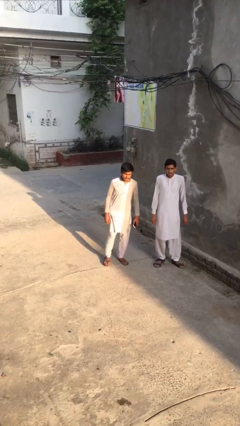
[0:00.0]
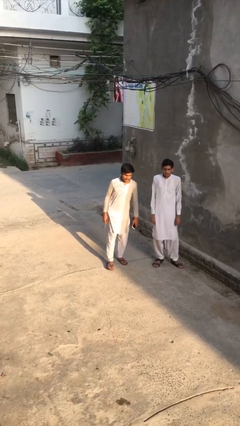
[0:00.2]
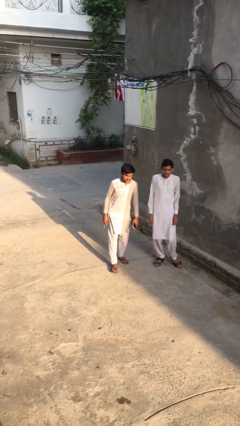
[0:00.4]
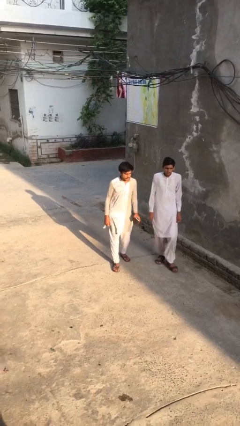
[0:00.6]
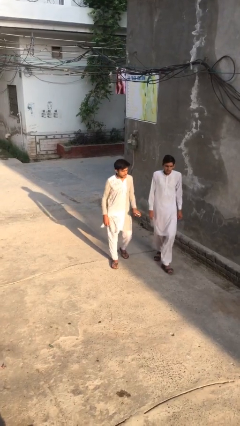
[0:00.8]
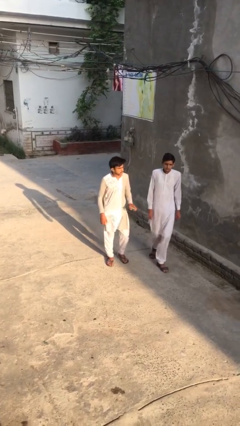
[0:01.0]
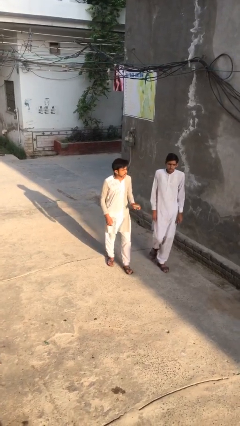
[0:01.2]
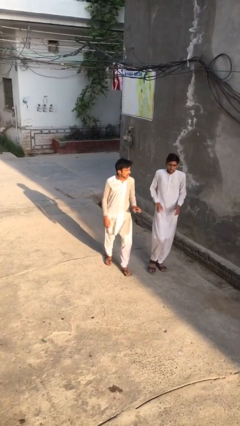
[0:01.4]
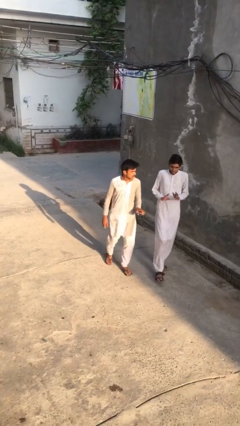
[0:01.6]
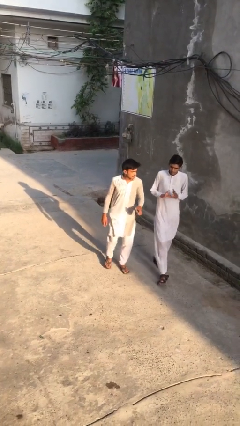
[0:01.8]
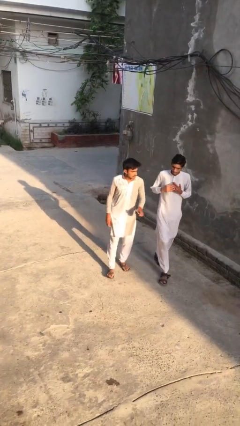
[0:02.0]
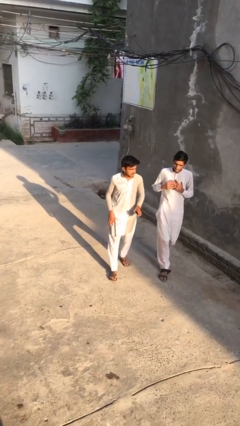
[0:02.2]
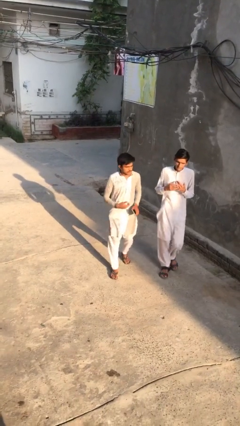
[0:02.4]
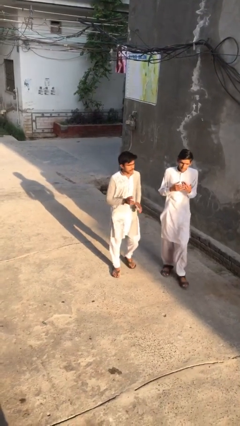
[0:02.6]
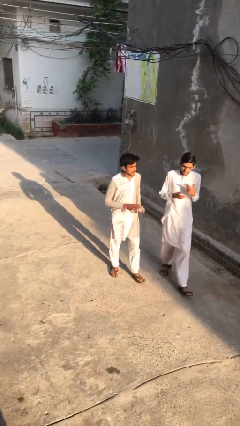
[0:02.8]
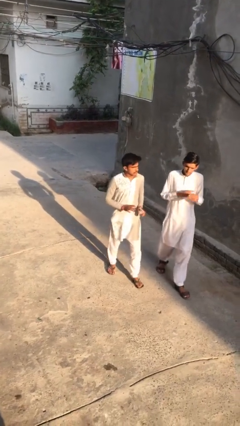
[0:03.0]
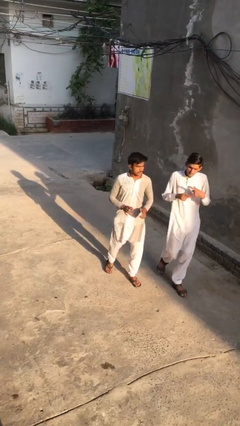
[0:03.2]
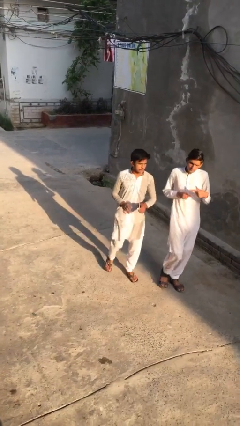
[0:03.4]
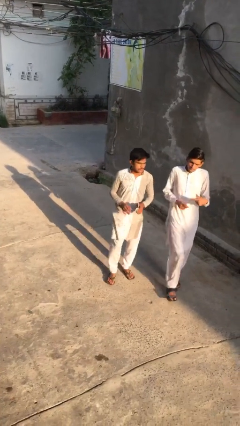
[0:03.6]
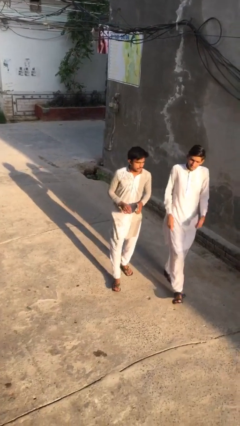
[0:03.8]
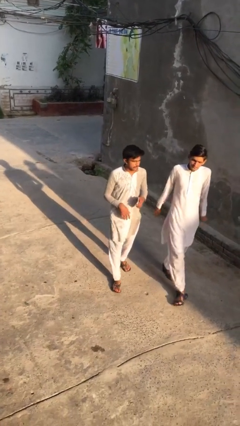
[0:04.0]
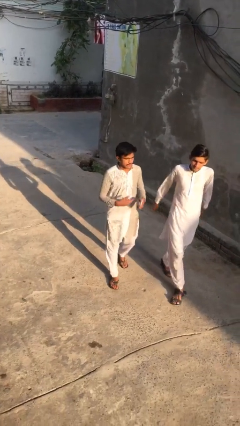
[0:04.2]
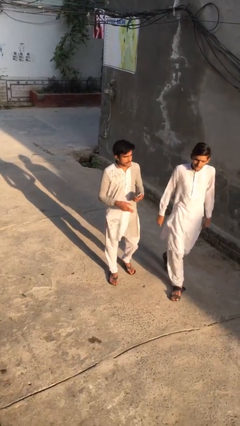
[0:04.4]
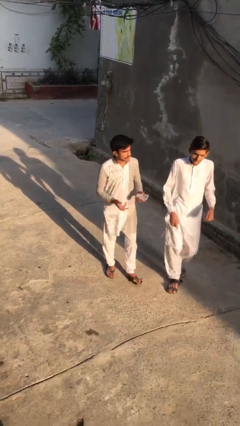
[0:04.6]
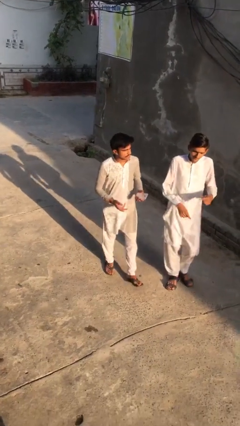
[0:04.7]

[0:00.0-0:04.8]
person talks to person

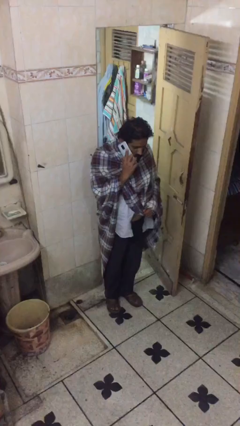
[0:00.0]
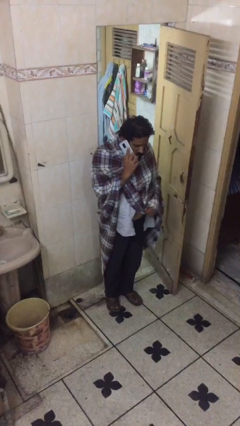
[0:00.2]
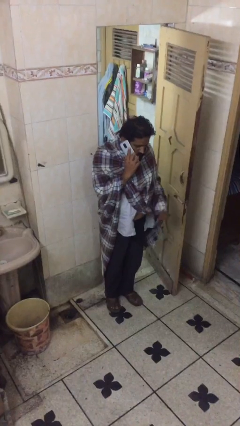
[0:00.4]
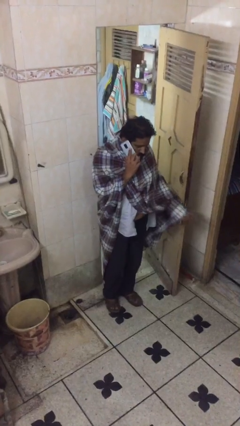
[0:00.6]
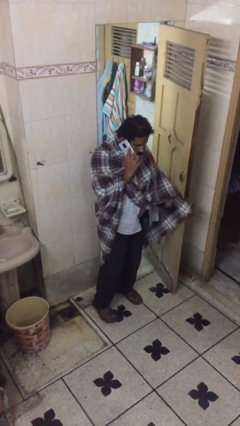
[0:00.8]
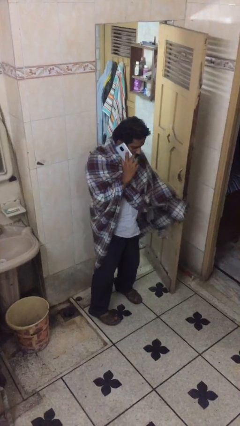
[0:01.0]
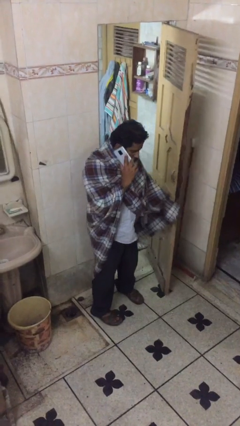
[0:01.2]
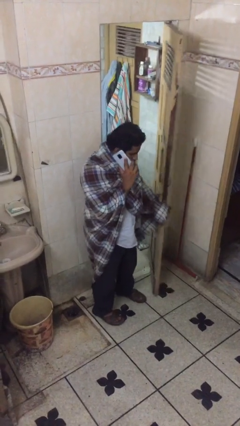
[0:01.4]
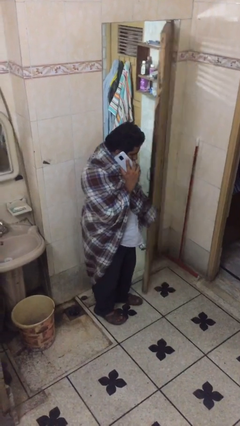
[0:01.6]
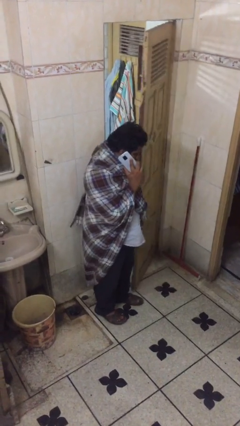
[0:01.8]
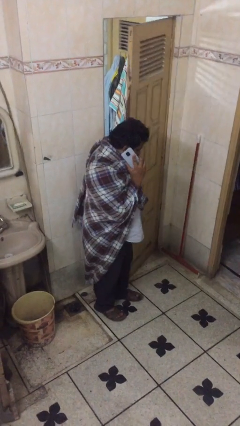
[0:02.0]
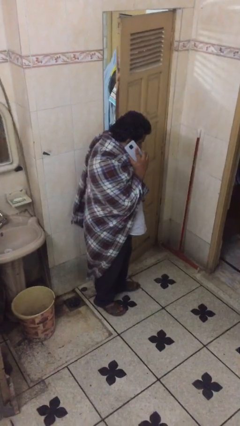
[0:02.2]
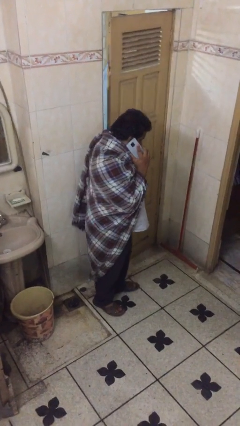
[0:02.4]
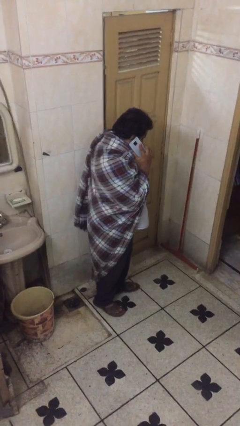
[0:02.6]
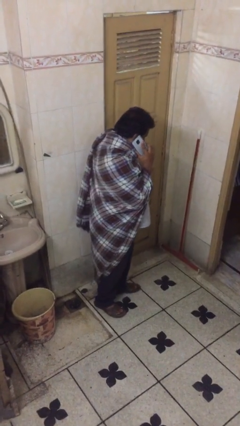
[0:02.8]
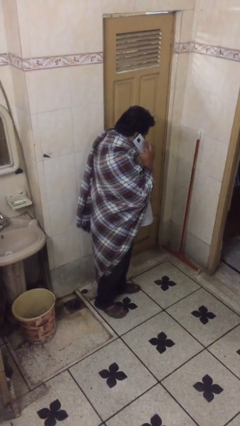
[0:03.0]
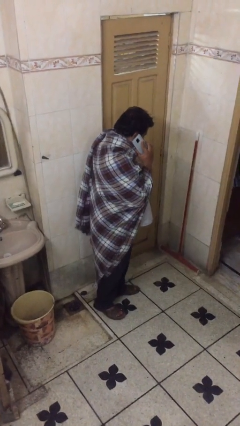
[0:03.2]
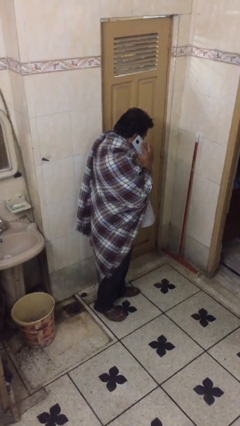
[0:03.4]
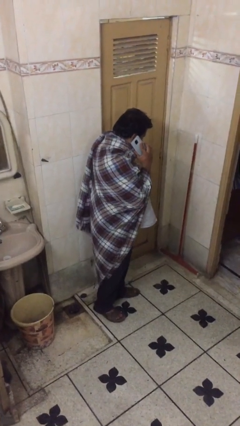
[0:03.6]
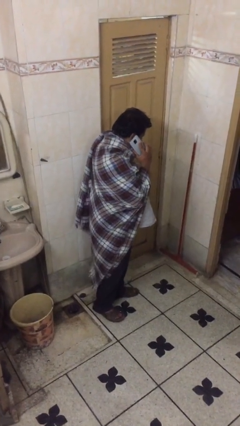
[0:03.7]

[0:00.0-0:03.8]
person closes facility door

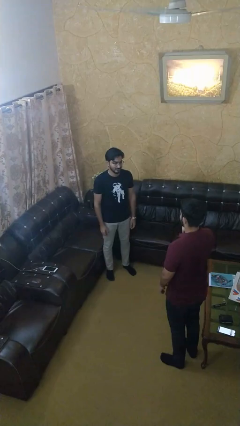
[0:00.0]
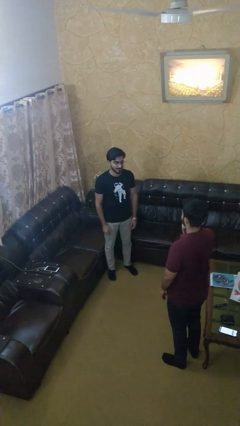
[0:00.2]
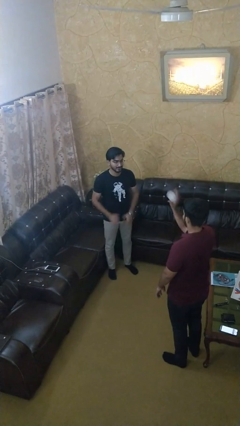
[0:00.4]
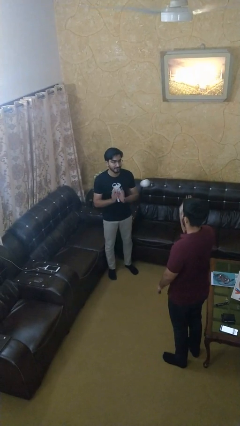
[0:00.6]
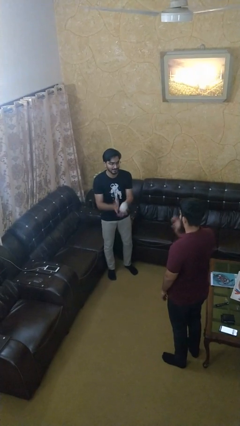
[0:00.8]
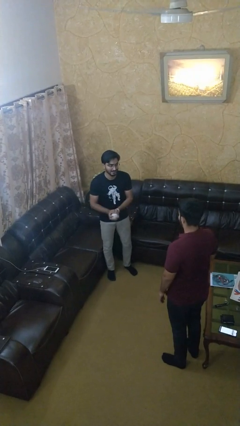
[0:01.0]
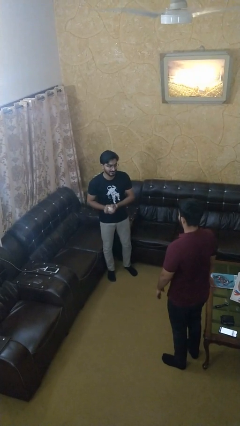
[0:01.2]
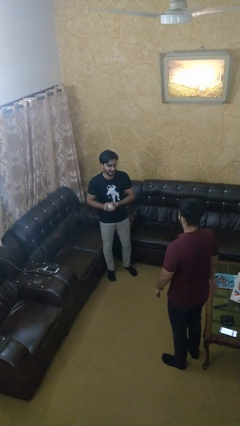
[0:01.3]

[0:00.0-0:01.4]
person catches object from person

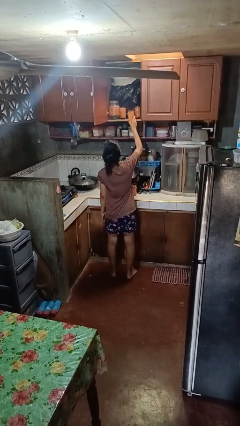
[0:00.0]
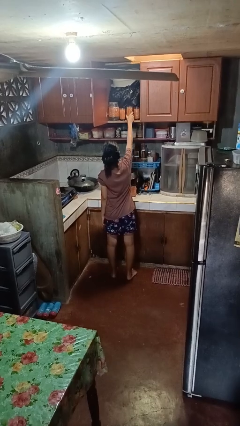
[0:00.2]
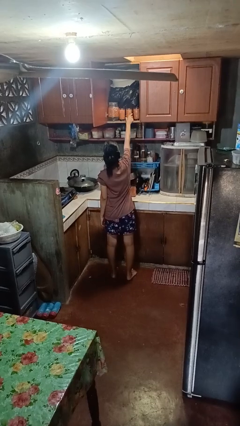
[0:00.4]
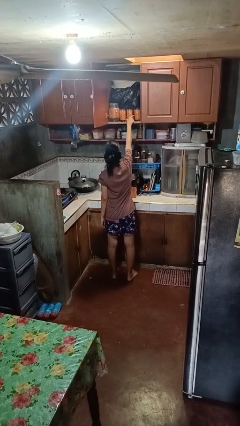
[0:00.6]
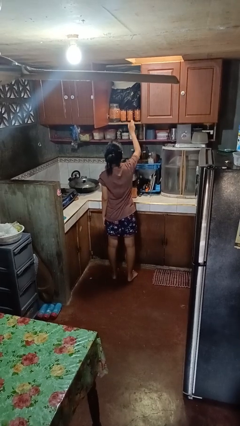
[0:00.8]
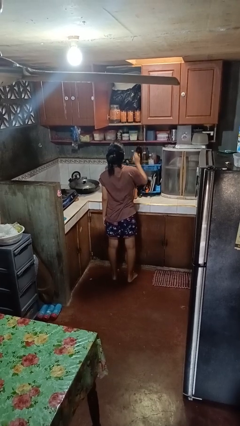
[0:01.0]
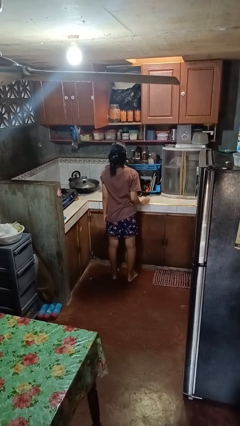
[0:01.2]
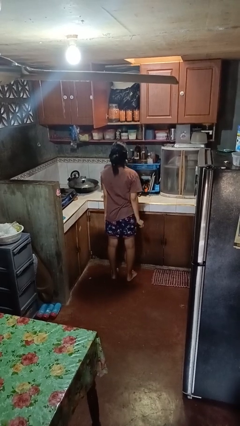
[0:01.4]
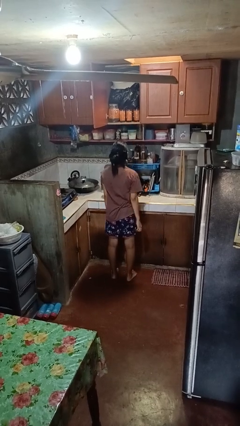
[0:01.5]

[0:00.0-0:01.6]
person puts object in cabinet

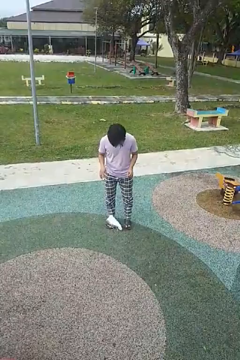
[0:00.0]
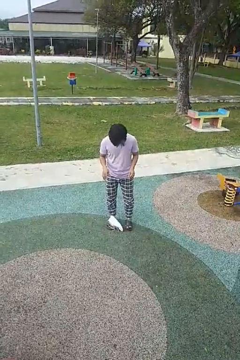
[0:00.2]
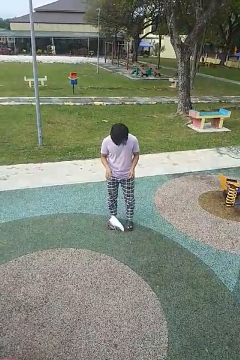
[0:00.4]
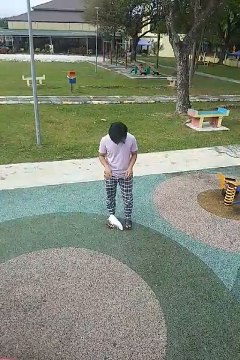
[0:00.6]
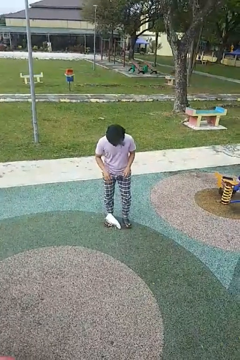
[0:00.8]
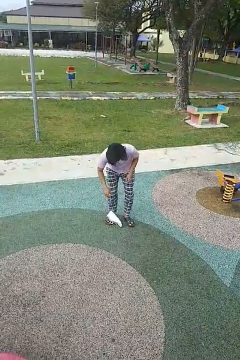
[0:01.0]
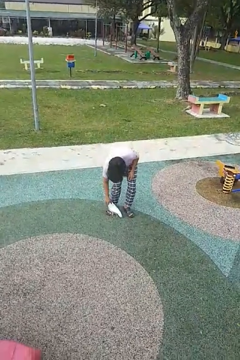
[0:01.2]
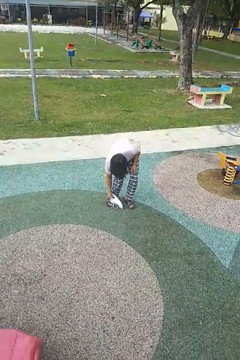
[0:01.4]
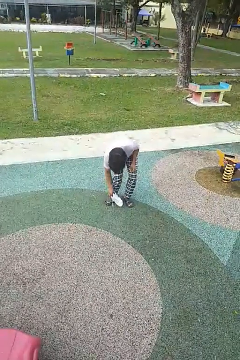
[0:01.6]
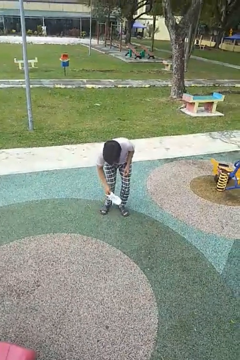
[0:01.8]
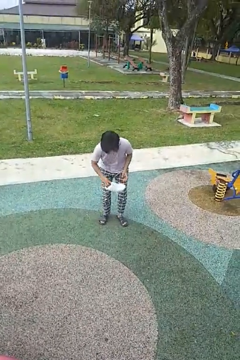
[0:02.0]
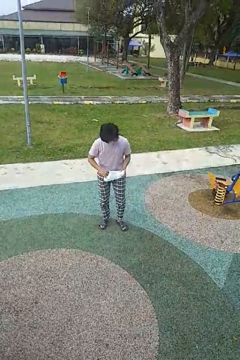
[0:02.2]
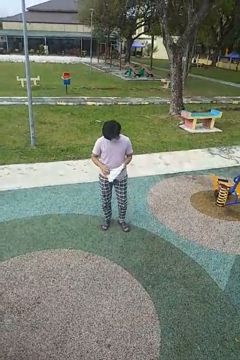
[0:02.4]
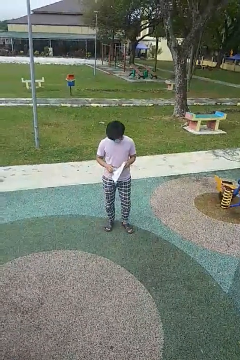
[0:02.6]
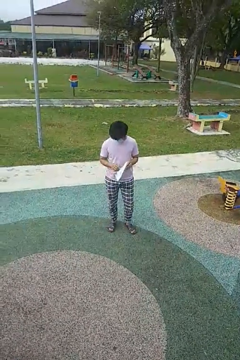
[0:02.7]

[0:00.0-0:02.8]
person picks up object from floor

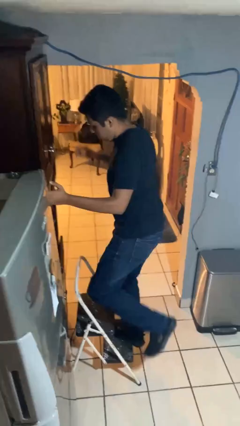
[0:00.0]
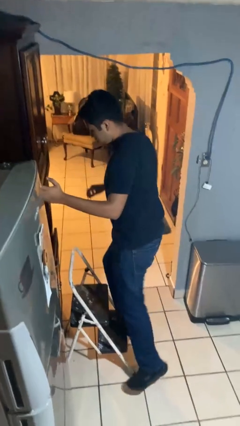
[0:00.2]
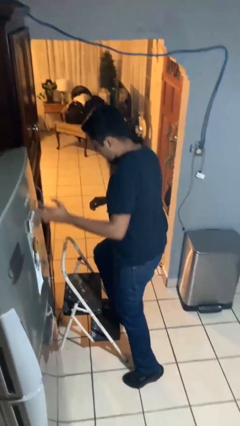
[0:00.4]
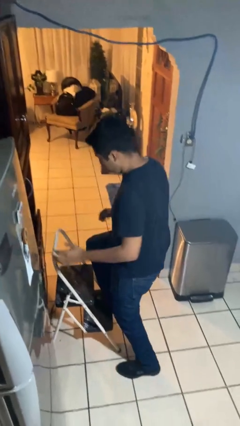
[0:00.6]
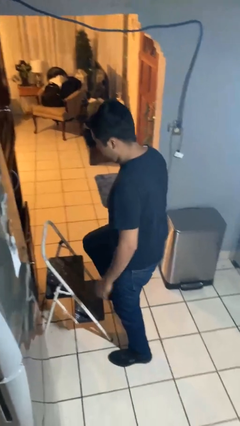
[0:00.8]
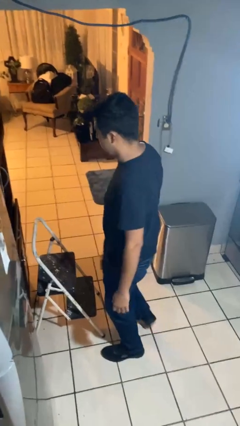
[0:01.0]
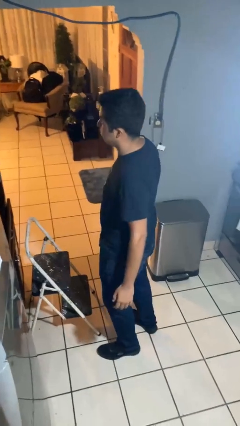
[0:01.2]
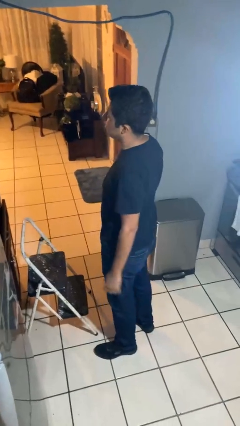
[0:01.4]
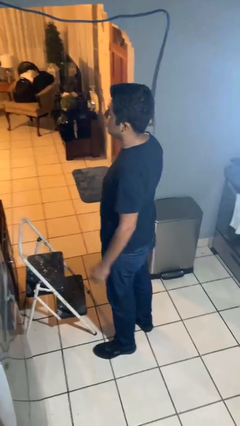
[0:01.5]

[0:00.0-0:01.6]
person climbs down ladder

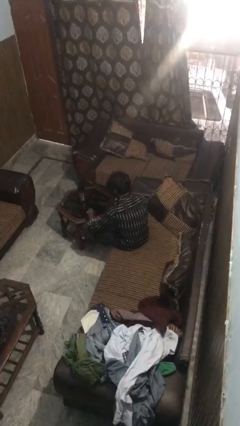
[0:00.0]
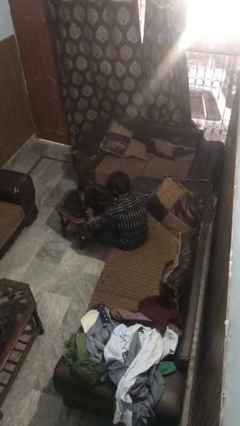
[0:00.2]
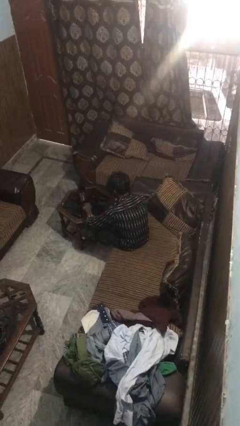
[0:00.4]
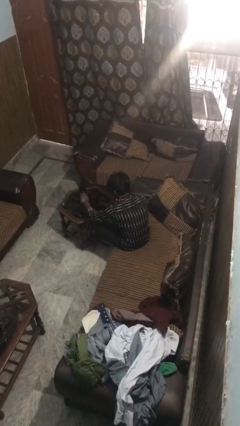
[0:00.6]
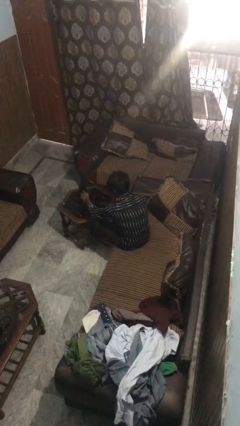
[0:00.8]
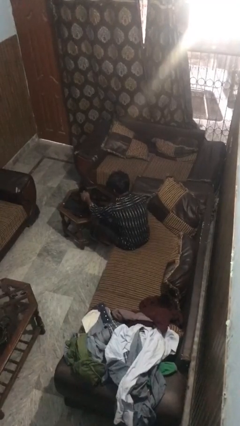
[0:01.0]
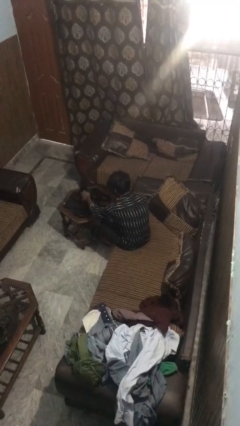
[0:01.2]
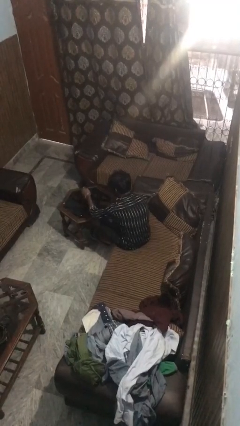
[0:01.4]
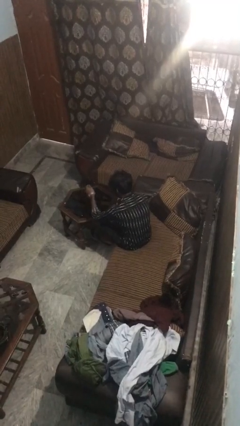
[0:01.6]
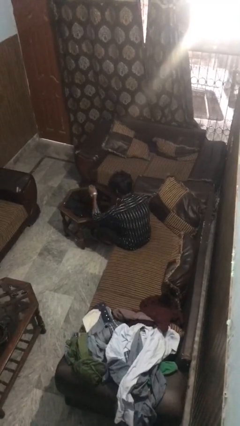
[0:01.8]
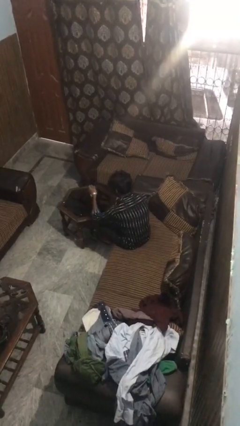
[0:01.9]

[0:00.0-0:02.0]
person picks up object from table
